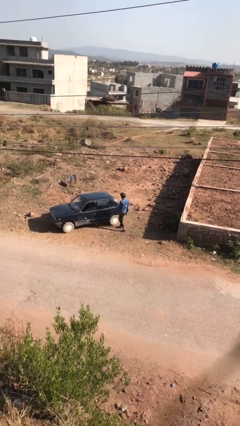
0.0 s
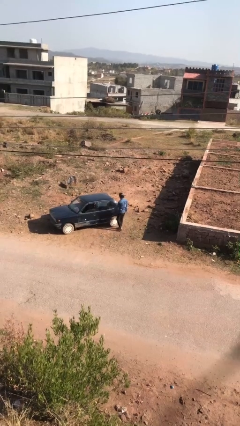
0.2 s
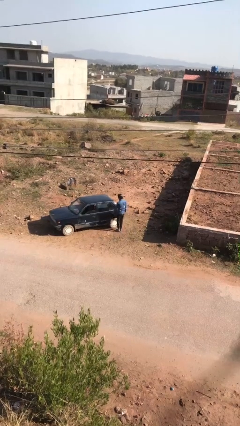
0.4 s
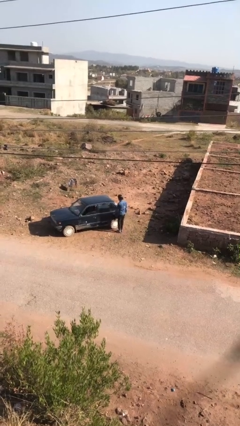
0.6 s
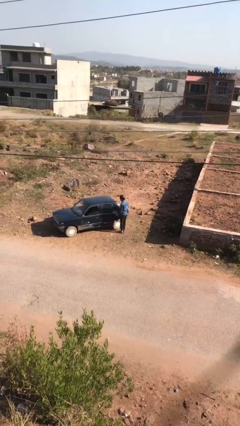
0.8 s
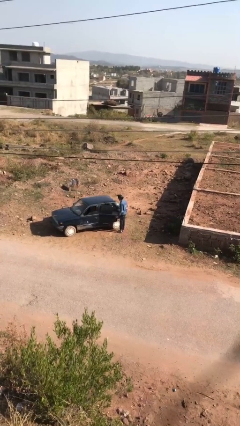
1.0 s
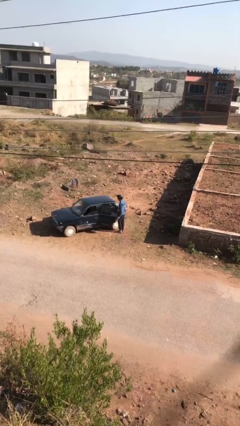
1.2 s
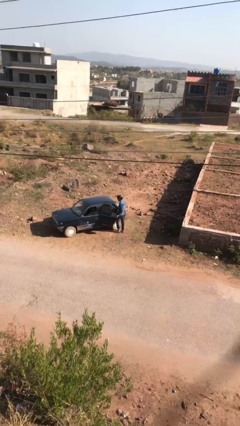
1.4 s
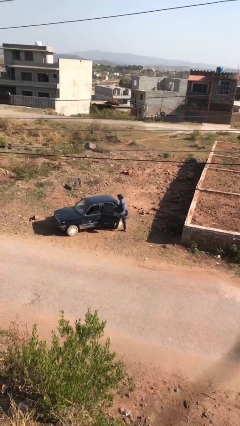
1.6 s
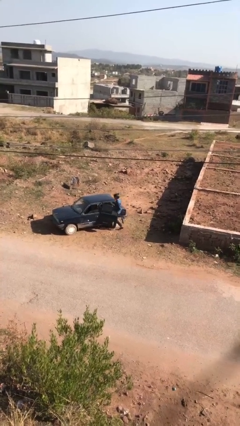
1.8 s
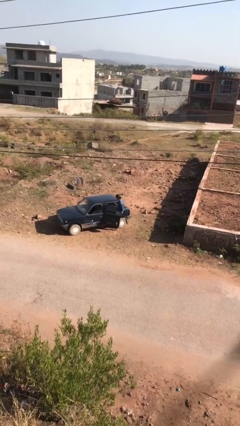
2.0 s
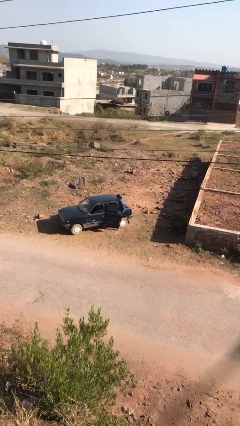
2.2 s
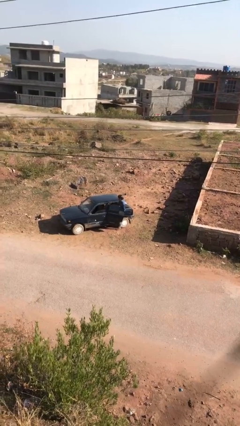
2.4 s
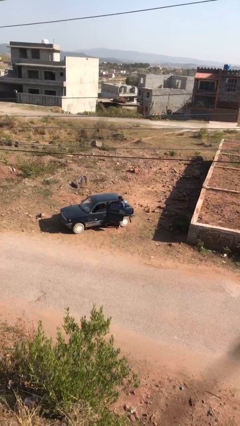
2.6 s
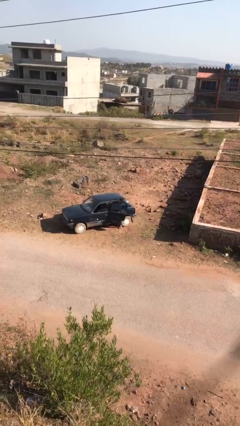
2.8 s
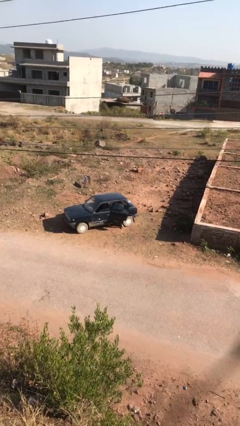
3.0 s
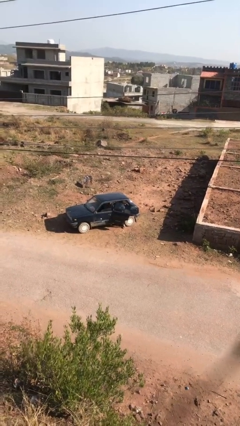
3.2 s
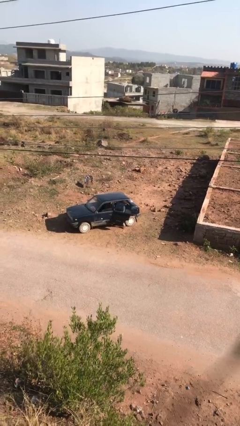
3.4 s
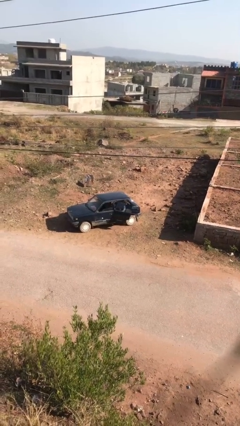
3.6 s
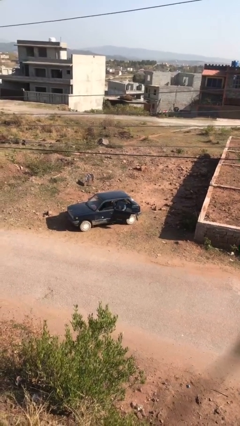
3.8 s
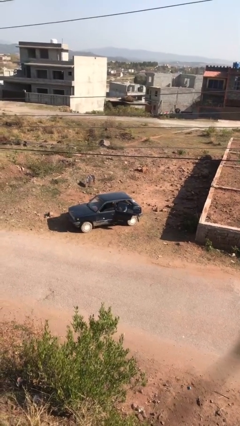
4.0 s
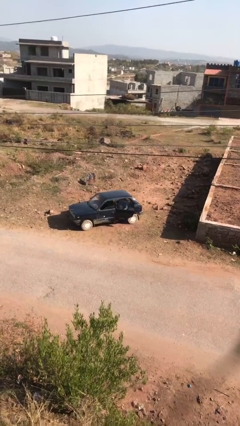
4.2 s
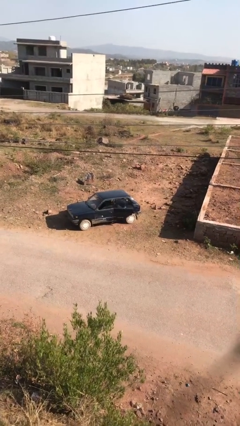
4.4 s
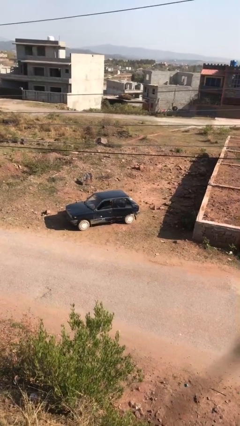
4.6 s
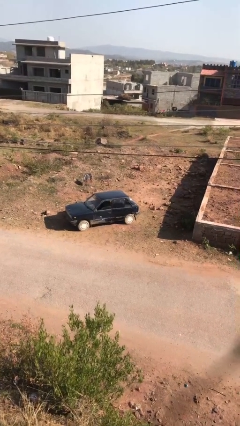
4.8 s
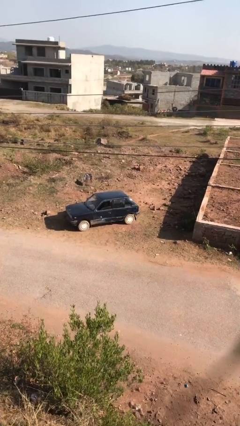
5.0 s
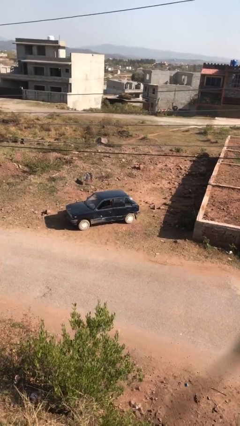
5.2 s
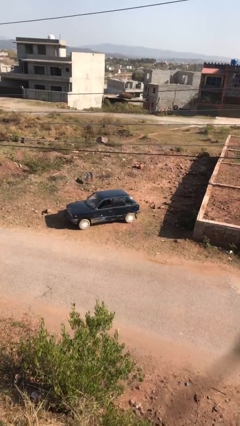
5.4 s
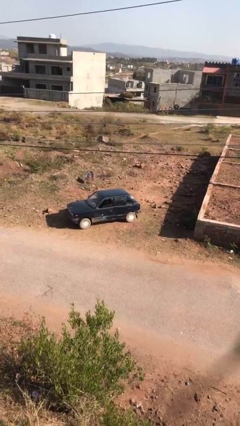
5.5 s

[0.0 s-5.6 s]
car picks up person

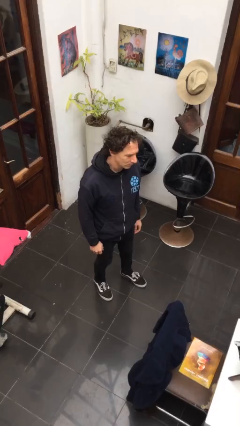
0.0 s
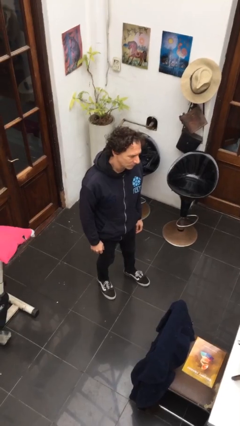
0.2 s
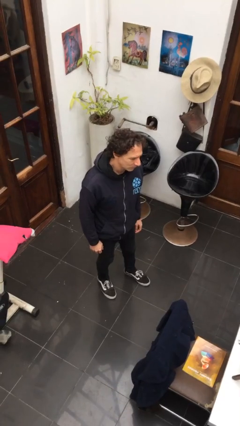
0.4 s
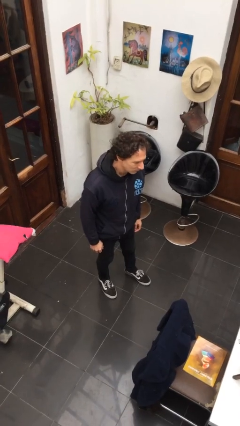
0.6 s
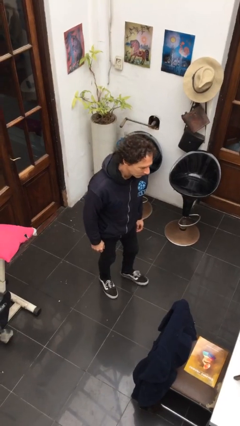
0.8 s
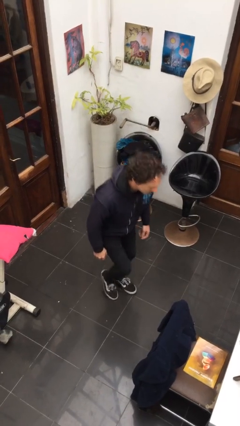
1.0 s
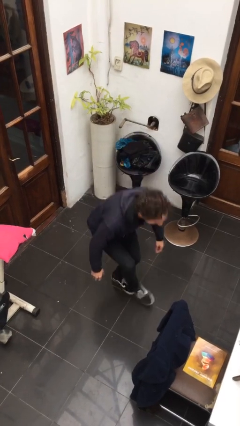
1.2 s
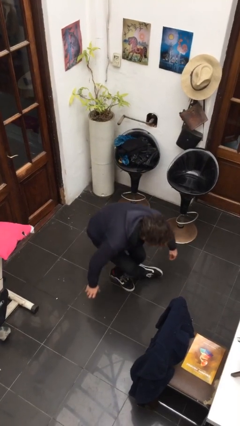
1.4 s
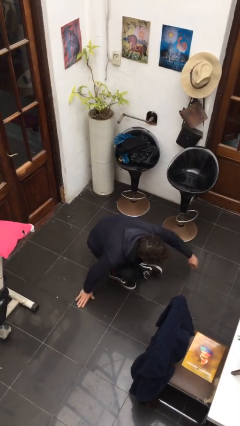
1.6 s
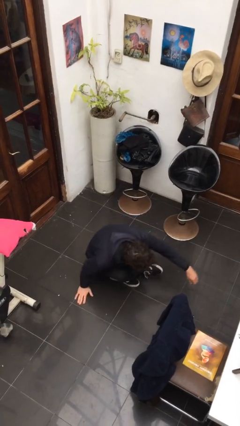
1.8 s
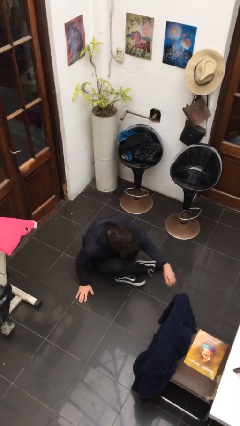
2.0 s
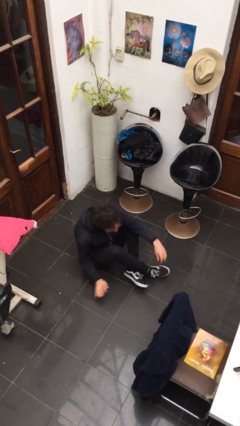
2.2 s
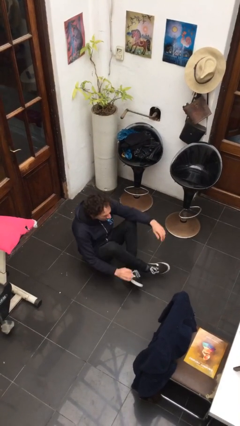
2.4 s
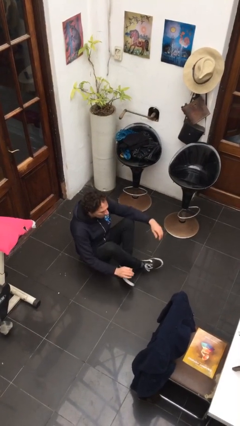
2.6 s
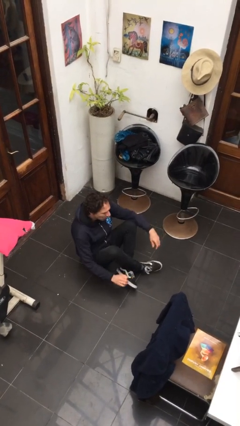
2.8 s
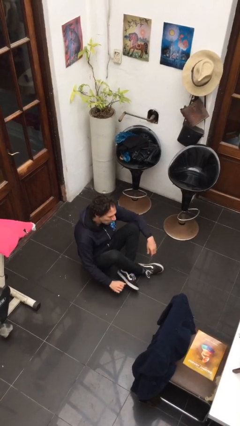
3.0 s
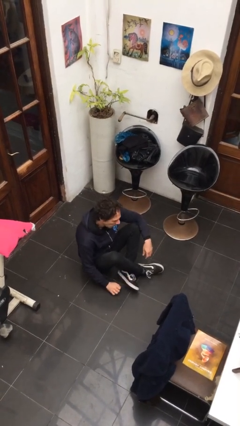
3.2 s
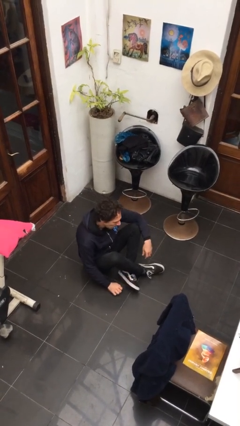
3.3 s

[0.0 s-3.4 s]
person sits crisscross

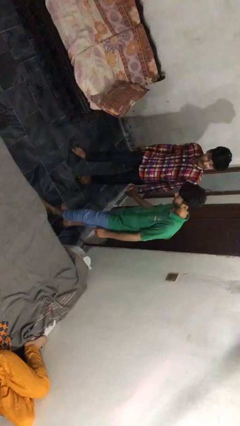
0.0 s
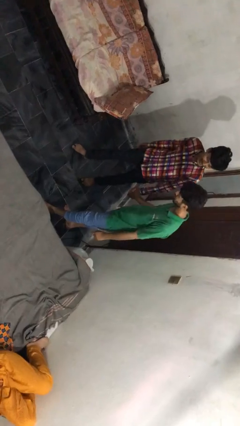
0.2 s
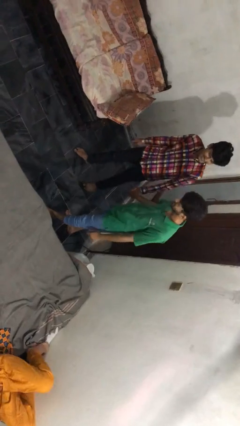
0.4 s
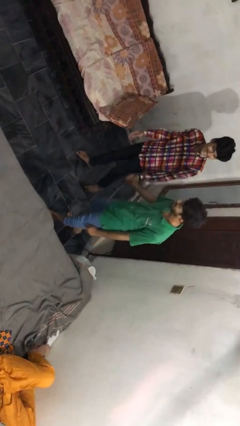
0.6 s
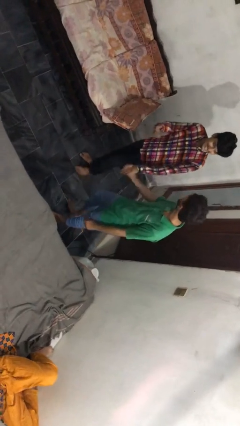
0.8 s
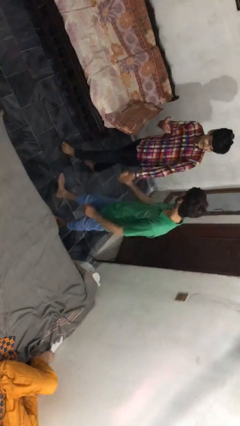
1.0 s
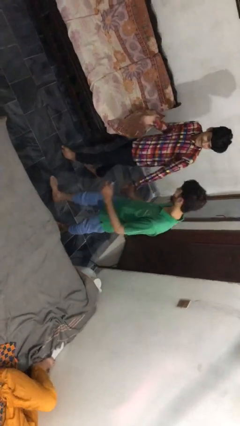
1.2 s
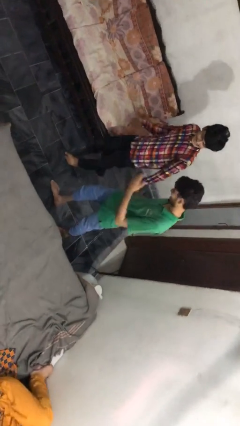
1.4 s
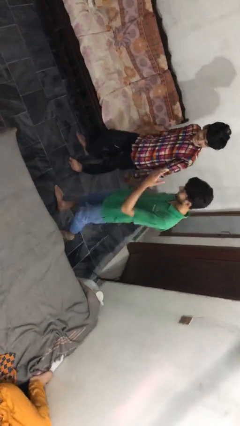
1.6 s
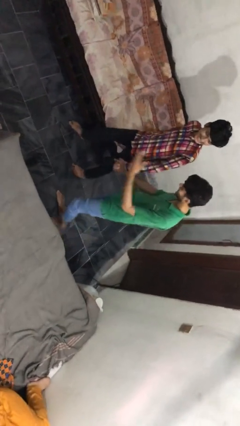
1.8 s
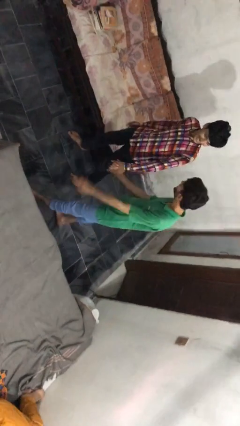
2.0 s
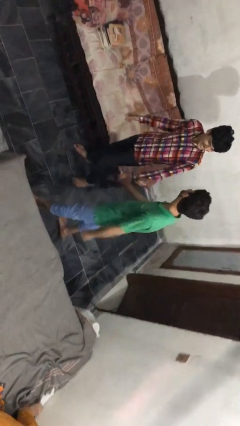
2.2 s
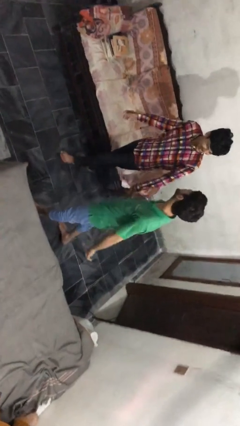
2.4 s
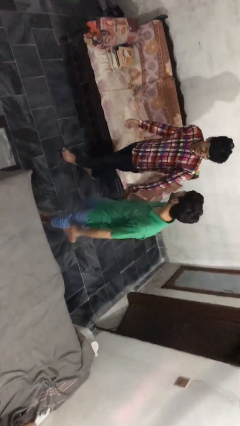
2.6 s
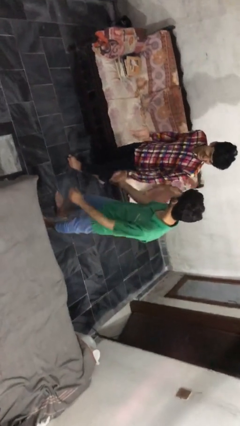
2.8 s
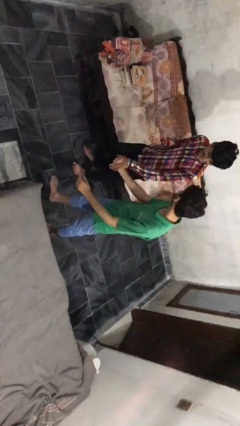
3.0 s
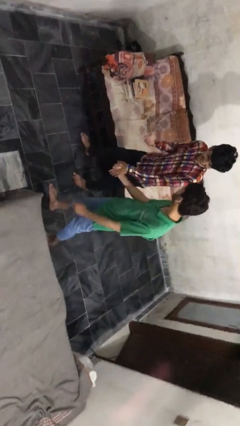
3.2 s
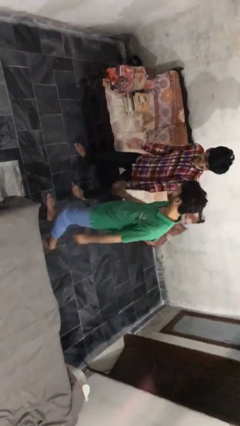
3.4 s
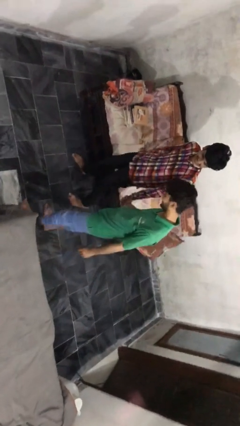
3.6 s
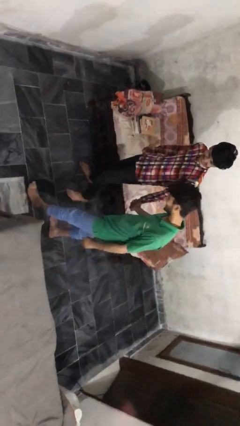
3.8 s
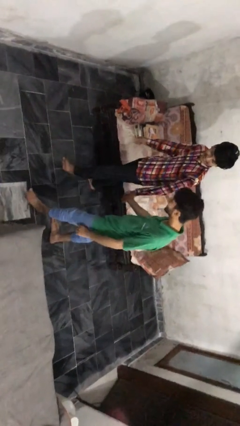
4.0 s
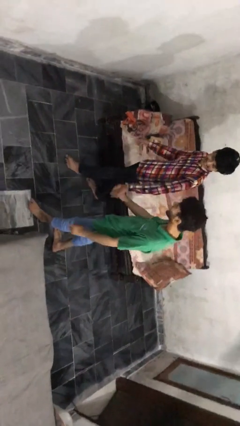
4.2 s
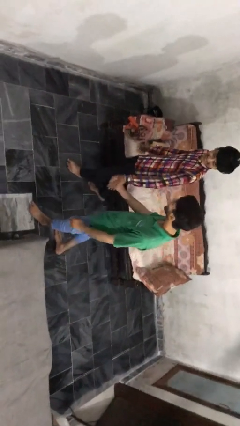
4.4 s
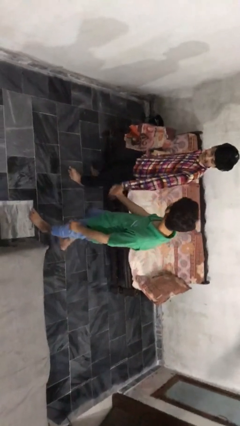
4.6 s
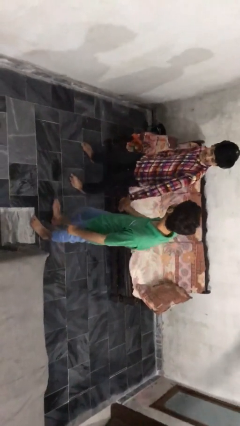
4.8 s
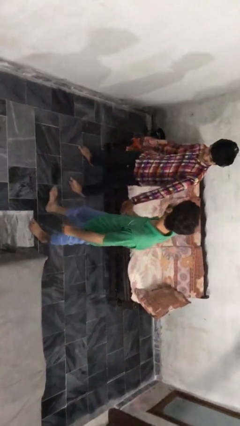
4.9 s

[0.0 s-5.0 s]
person holds hand

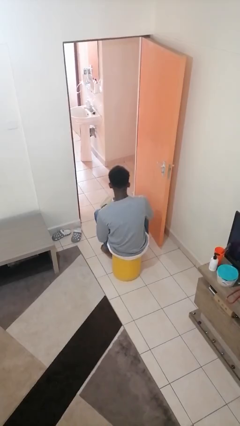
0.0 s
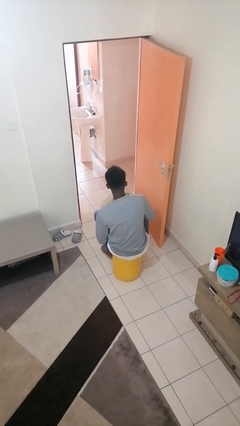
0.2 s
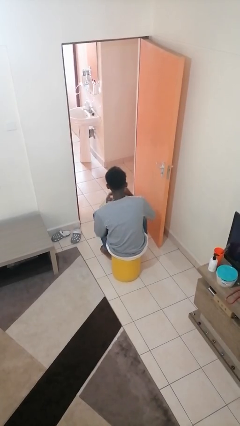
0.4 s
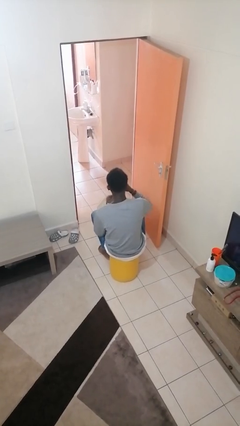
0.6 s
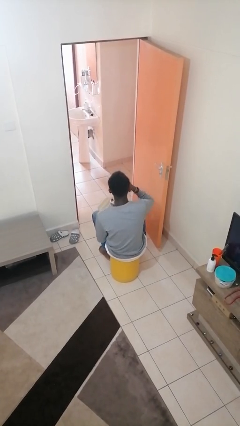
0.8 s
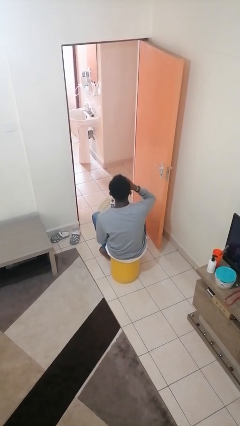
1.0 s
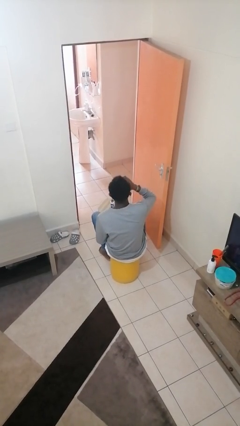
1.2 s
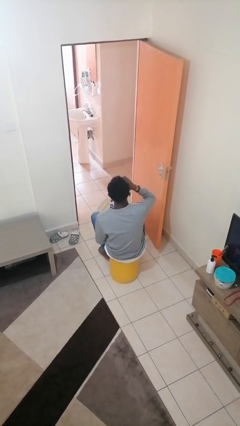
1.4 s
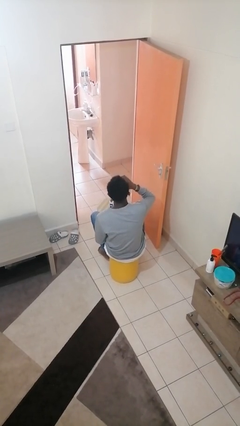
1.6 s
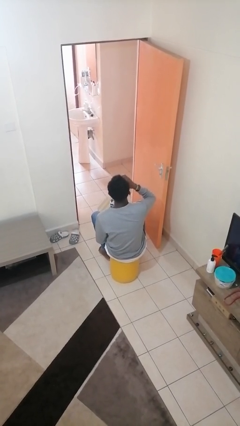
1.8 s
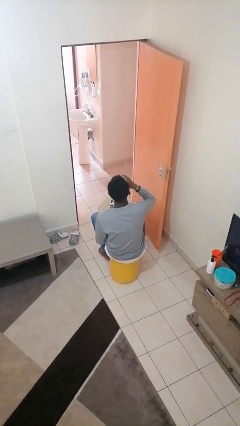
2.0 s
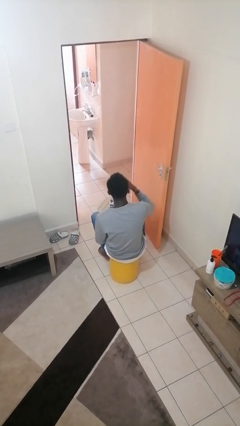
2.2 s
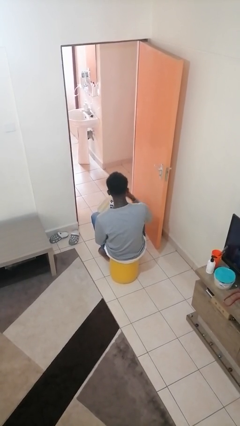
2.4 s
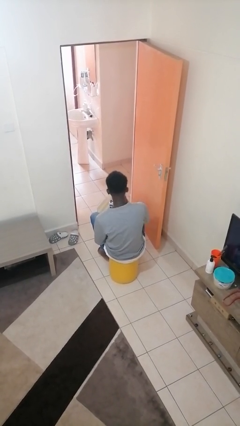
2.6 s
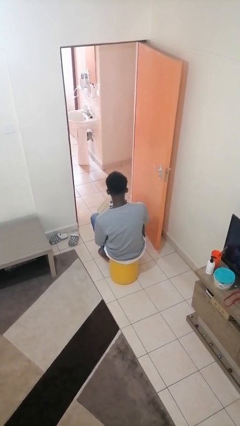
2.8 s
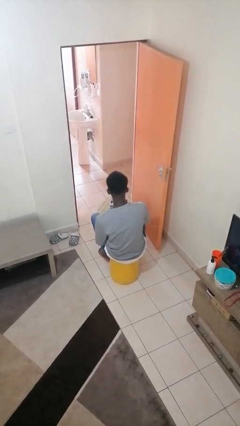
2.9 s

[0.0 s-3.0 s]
person drinks from cup

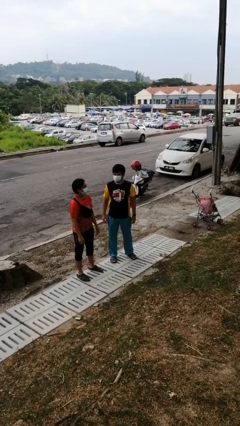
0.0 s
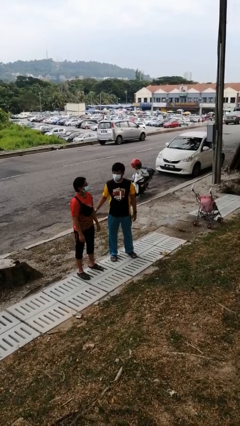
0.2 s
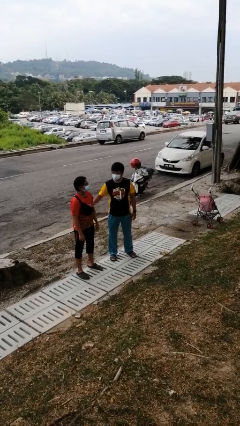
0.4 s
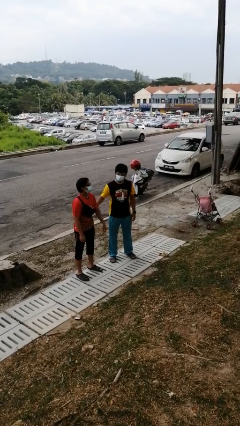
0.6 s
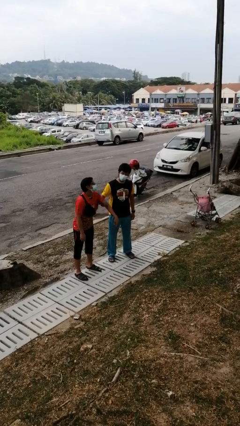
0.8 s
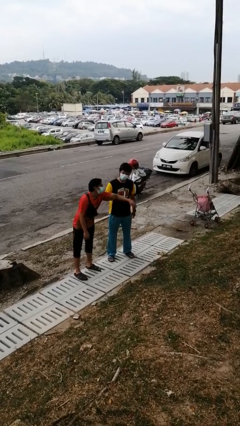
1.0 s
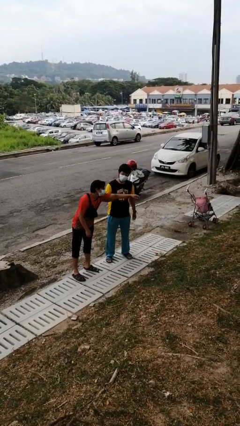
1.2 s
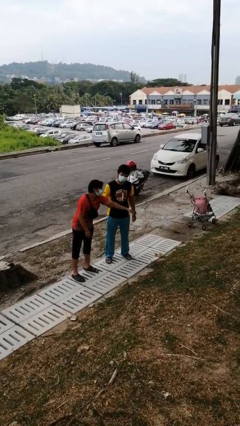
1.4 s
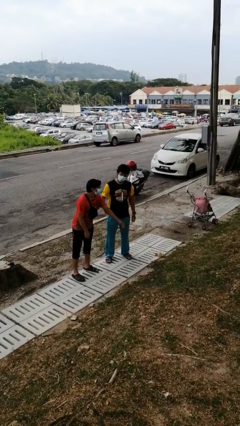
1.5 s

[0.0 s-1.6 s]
person grabs person by bicep
